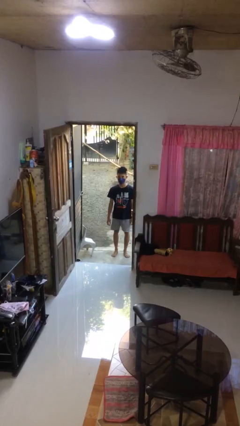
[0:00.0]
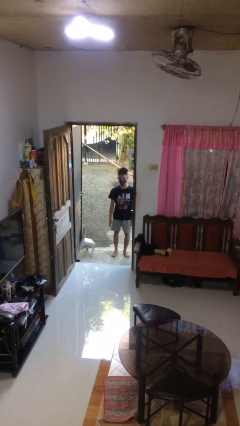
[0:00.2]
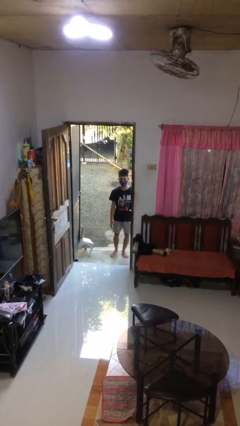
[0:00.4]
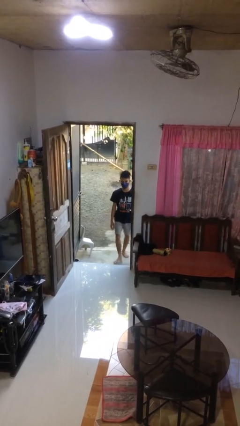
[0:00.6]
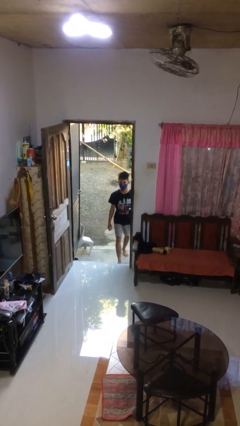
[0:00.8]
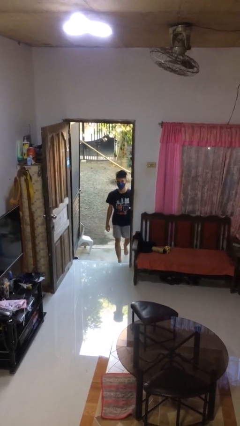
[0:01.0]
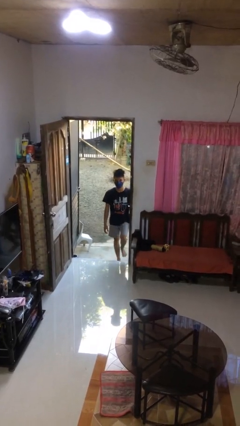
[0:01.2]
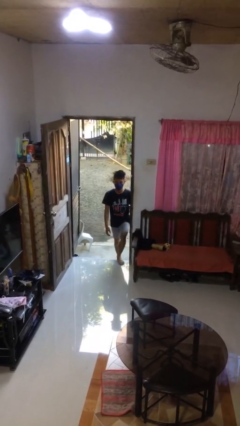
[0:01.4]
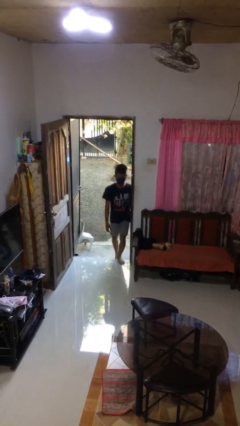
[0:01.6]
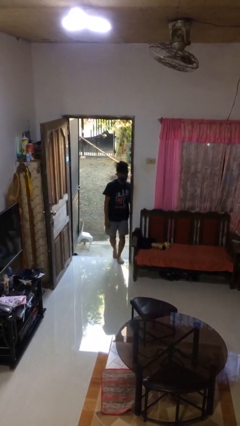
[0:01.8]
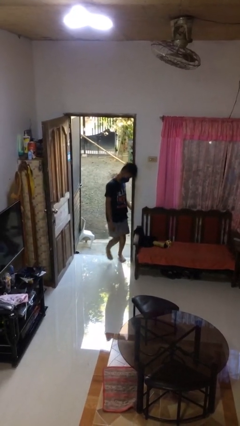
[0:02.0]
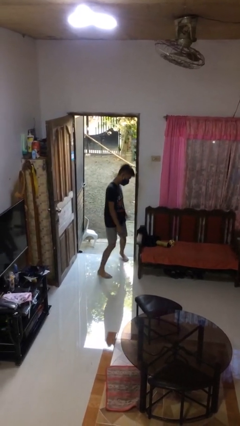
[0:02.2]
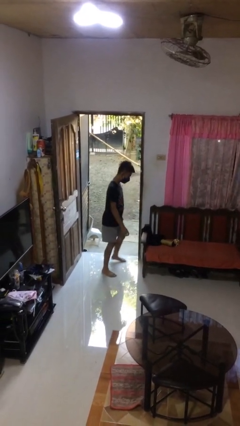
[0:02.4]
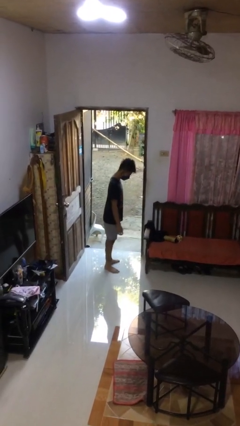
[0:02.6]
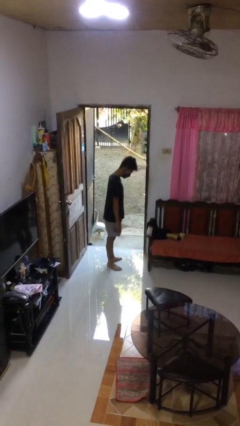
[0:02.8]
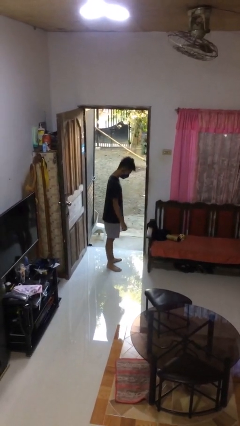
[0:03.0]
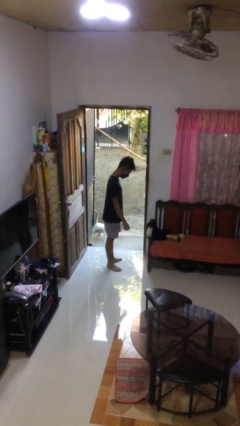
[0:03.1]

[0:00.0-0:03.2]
person bumps into wall

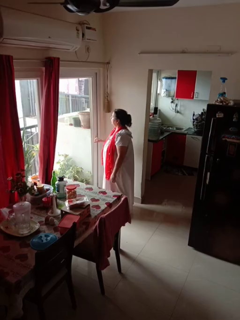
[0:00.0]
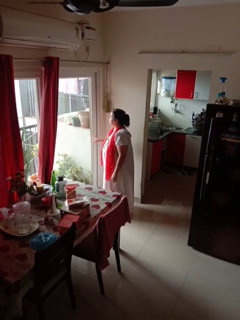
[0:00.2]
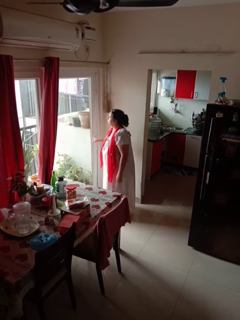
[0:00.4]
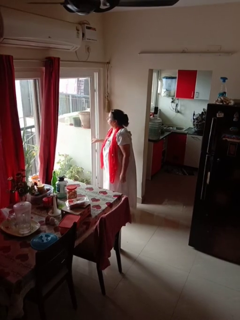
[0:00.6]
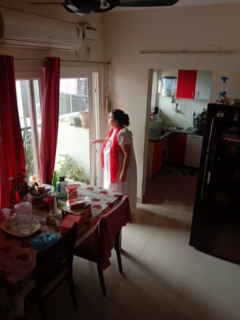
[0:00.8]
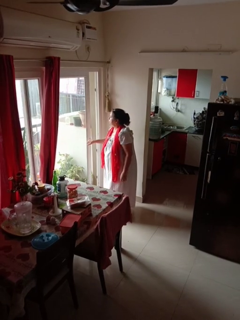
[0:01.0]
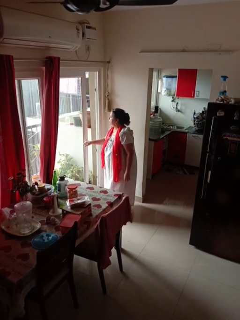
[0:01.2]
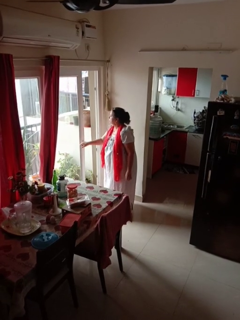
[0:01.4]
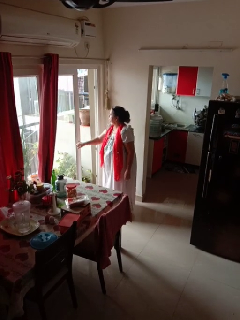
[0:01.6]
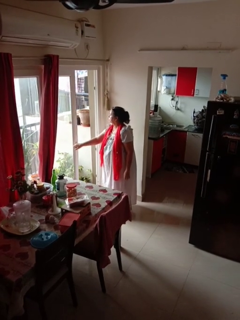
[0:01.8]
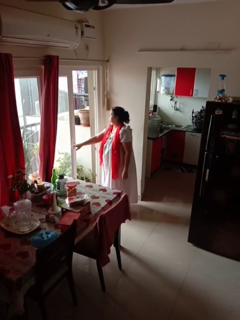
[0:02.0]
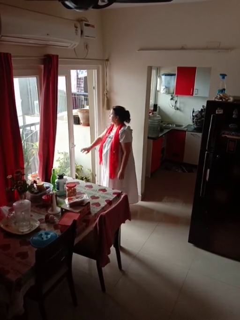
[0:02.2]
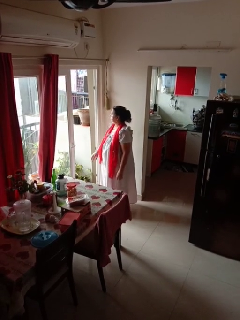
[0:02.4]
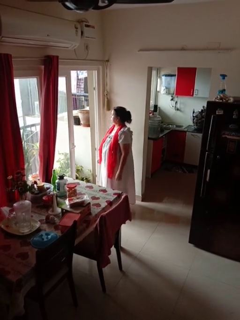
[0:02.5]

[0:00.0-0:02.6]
person opens sliding door

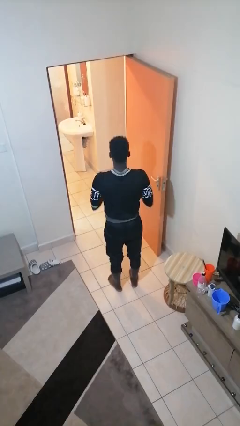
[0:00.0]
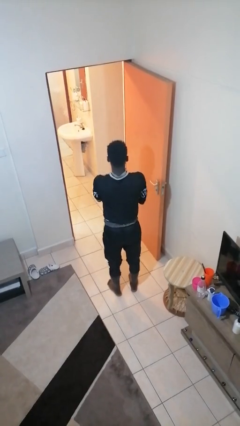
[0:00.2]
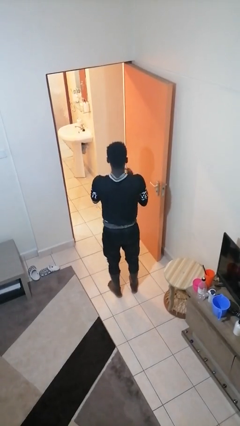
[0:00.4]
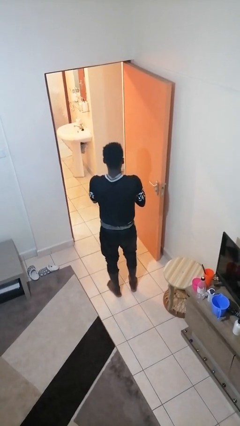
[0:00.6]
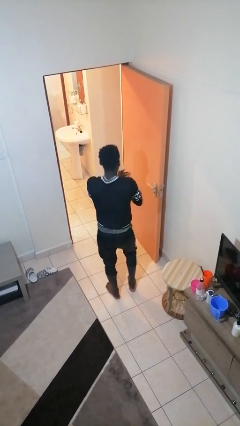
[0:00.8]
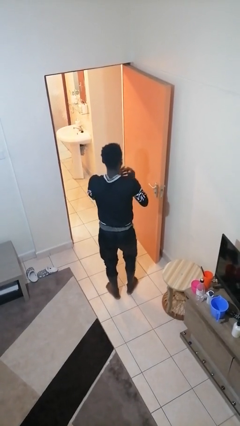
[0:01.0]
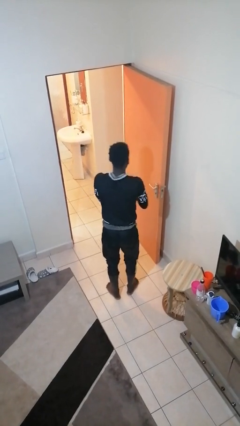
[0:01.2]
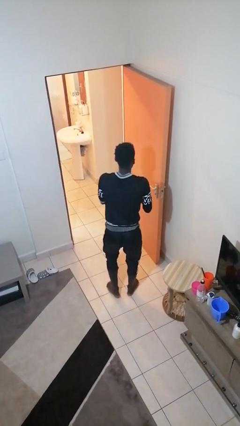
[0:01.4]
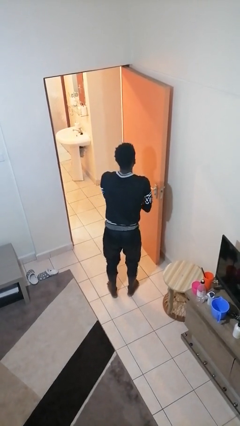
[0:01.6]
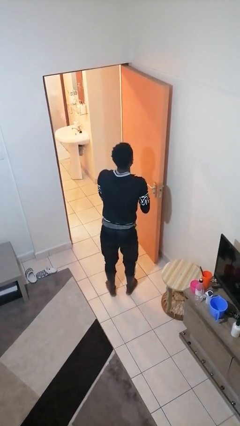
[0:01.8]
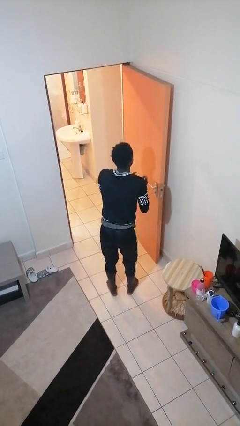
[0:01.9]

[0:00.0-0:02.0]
person claps hands

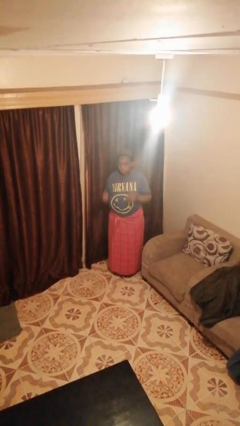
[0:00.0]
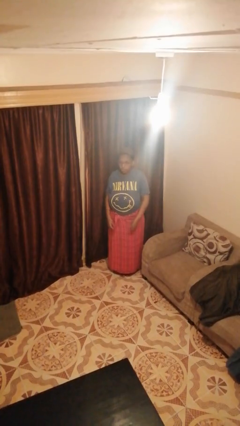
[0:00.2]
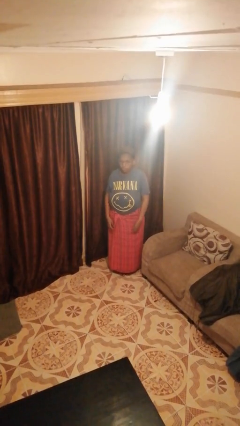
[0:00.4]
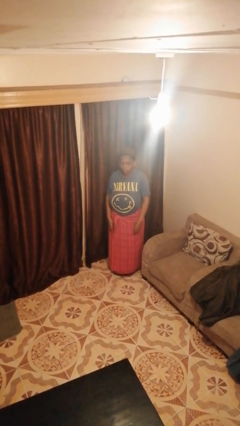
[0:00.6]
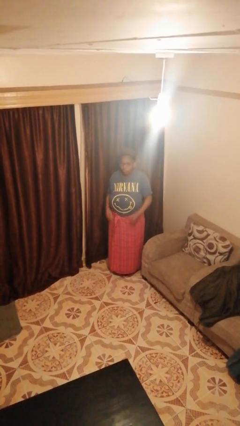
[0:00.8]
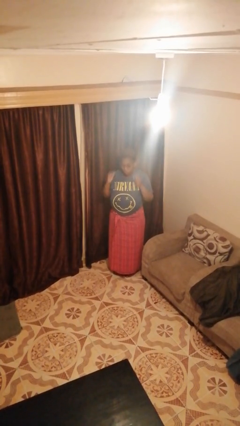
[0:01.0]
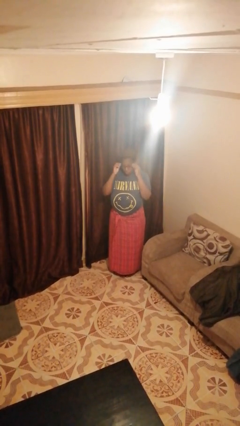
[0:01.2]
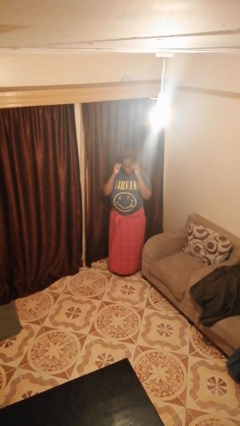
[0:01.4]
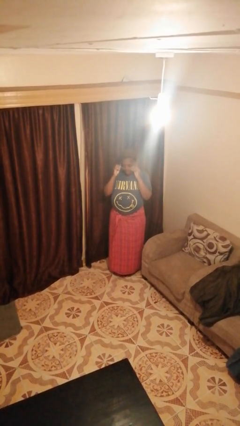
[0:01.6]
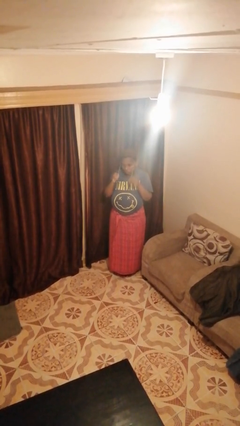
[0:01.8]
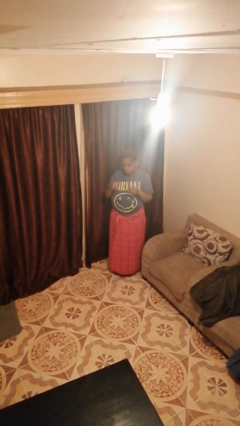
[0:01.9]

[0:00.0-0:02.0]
person takes off glasses

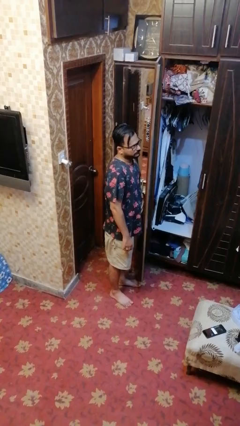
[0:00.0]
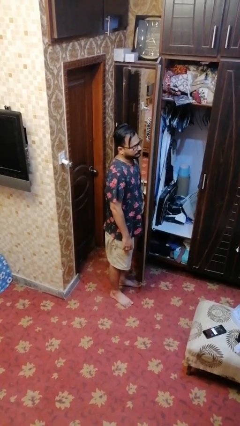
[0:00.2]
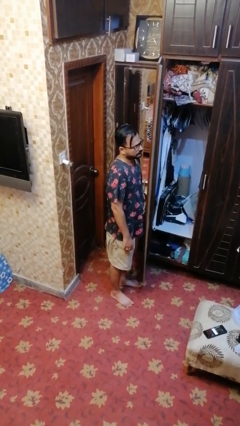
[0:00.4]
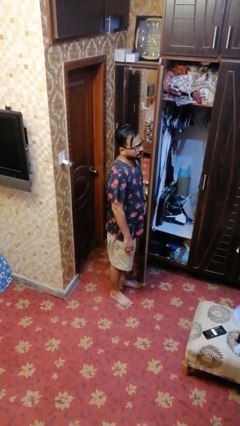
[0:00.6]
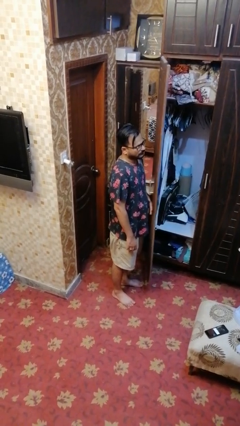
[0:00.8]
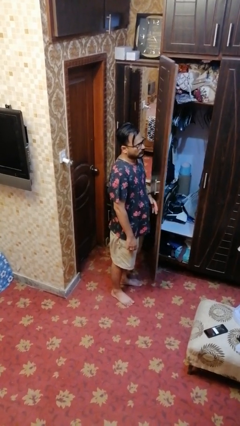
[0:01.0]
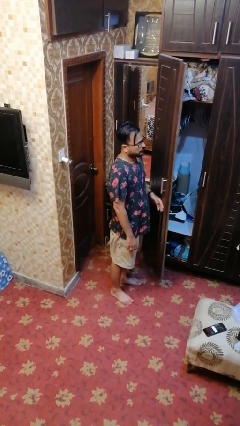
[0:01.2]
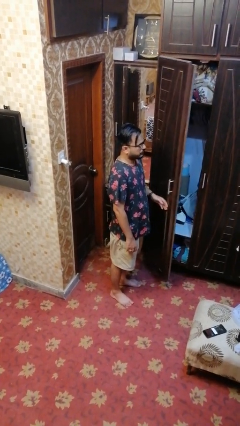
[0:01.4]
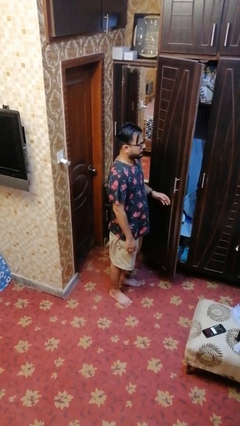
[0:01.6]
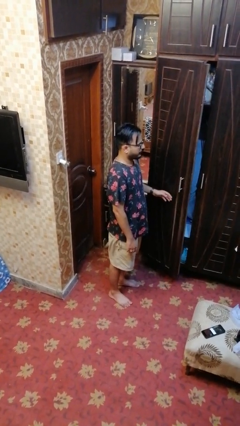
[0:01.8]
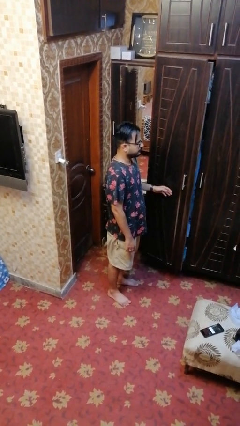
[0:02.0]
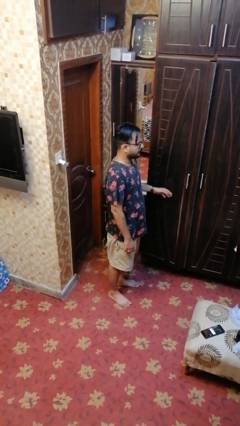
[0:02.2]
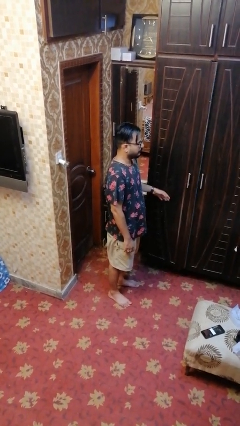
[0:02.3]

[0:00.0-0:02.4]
person closes closet door

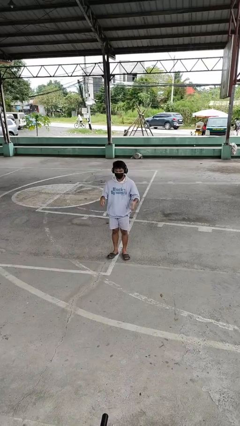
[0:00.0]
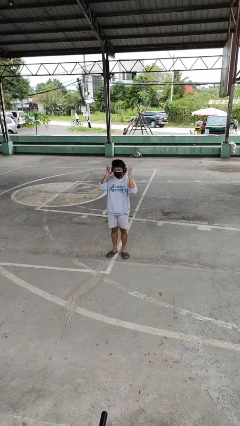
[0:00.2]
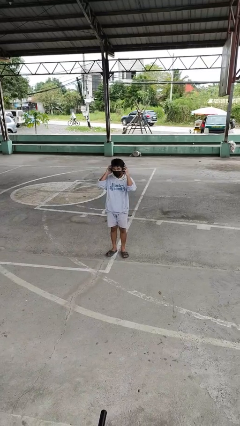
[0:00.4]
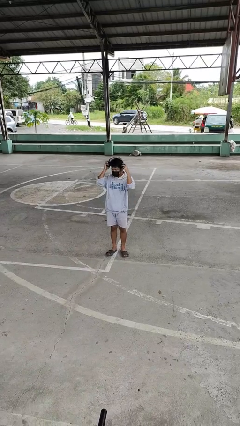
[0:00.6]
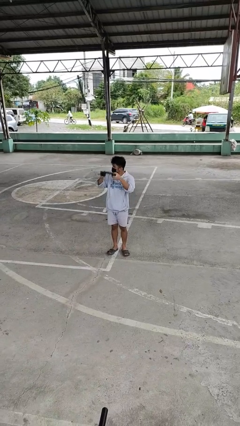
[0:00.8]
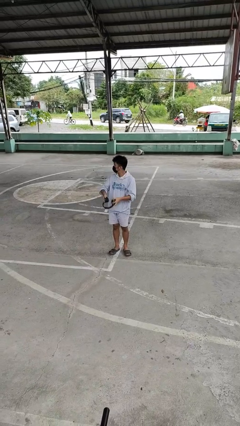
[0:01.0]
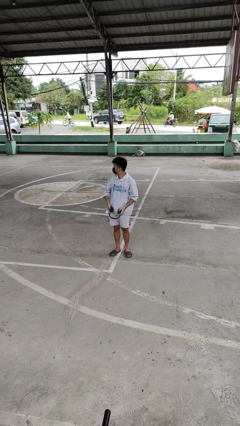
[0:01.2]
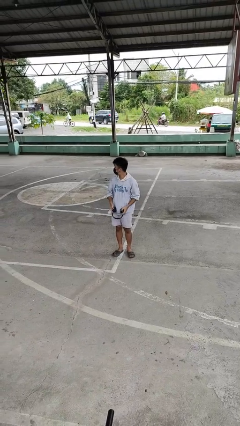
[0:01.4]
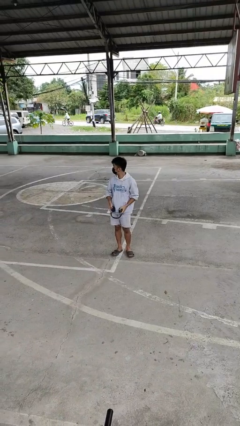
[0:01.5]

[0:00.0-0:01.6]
person takes off headphones

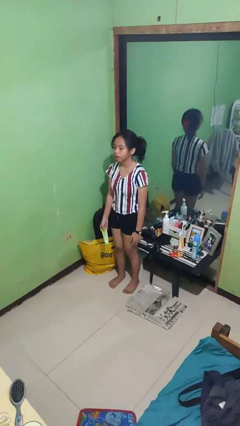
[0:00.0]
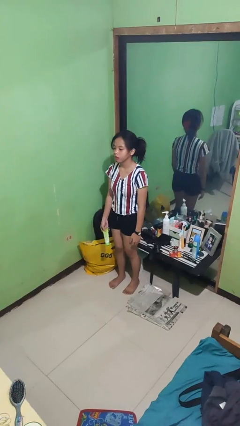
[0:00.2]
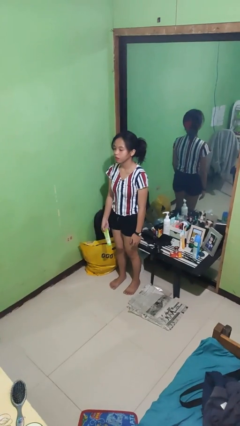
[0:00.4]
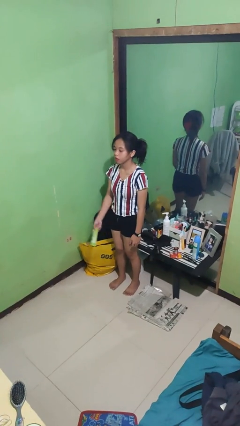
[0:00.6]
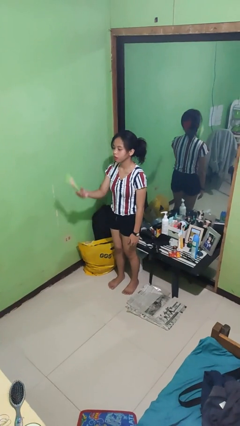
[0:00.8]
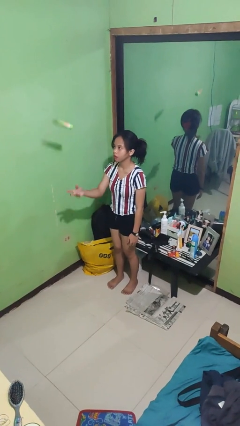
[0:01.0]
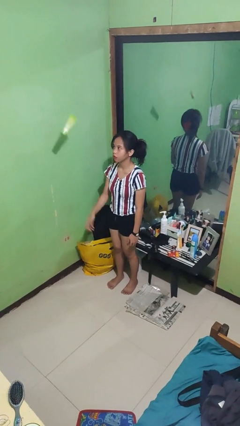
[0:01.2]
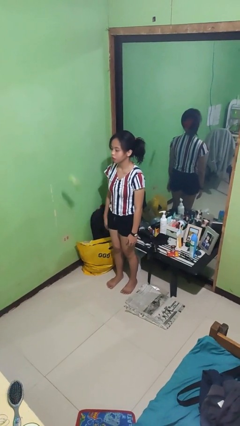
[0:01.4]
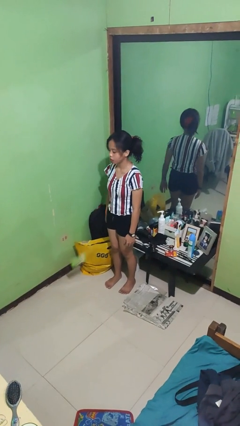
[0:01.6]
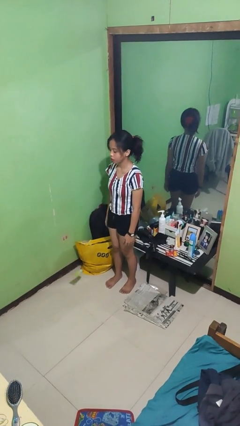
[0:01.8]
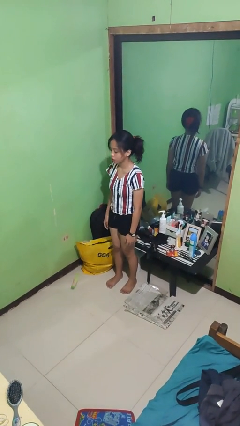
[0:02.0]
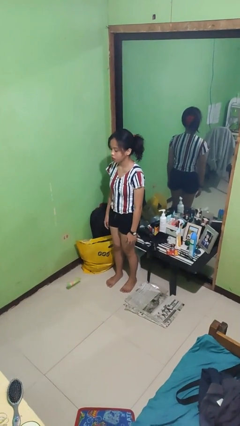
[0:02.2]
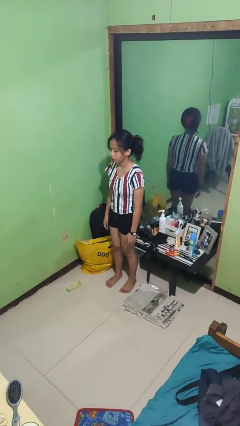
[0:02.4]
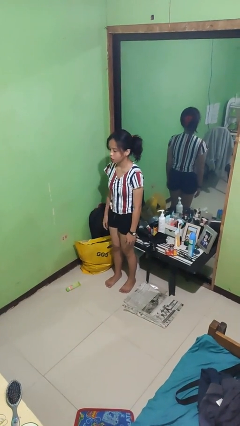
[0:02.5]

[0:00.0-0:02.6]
person throws object into air

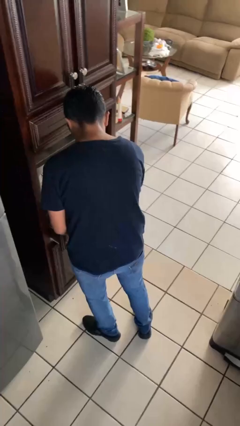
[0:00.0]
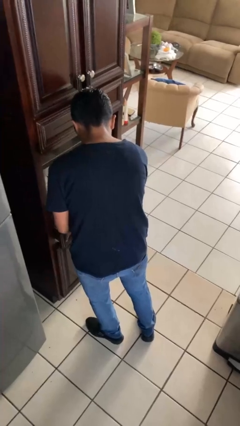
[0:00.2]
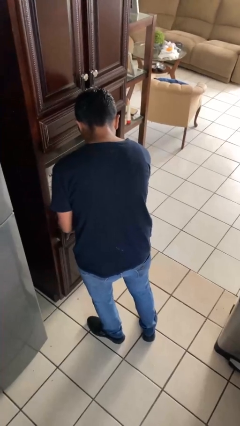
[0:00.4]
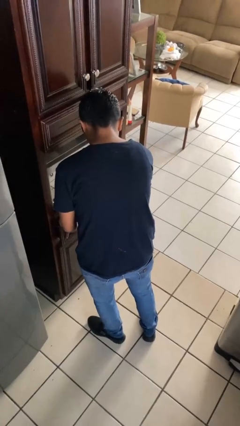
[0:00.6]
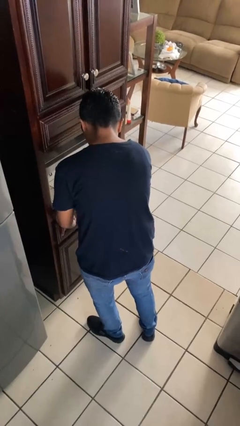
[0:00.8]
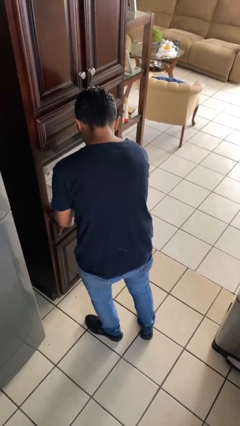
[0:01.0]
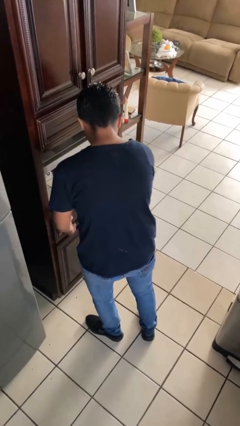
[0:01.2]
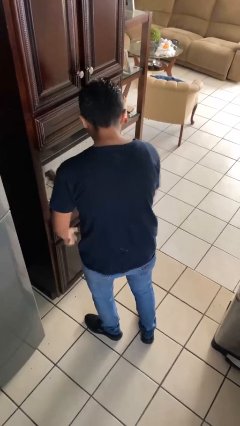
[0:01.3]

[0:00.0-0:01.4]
person closes kitchen drawer
